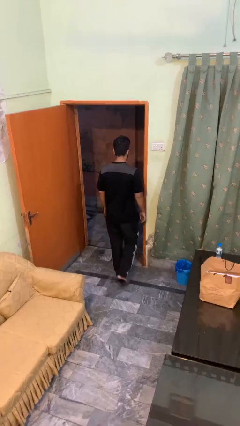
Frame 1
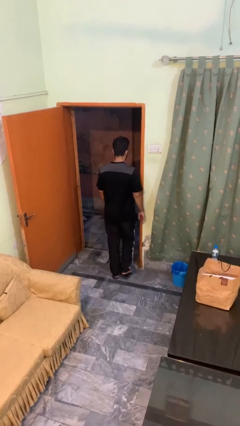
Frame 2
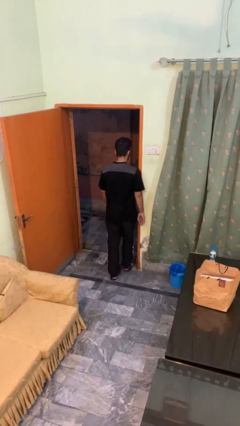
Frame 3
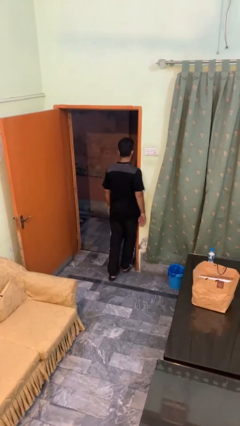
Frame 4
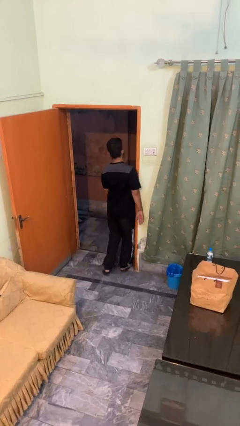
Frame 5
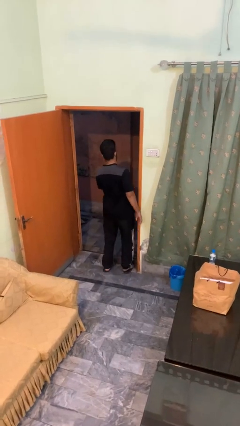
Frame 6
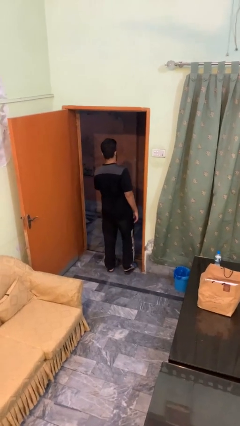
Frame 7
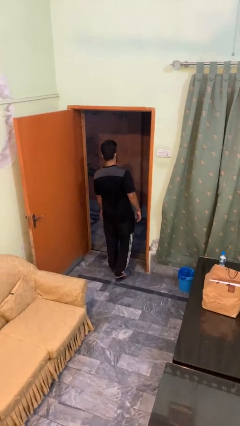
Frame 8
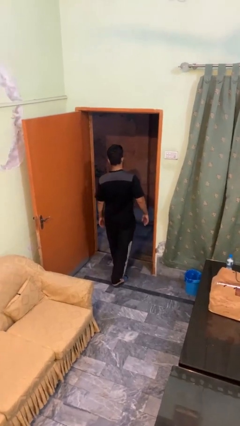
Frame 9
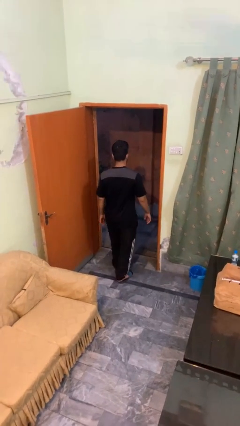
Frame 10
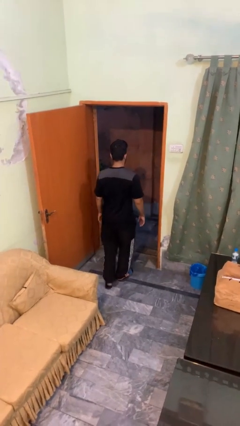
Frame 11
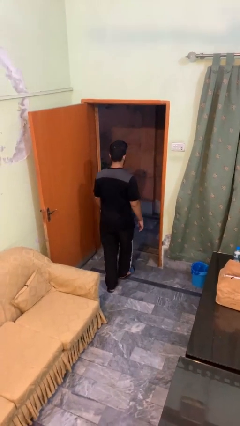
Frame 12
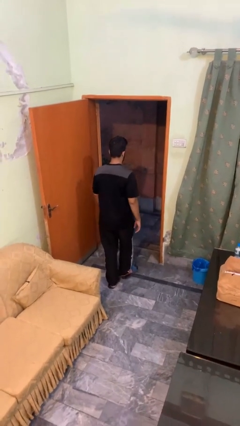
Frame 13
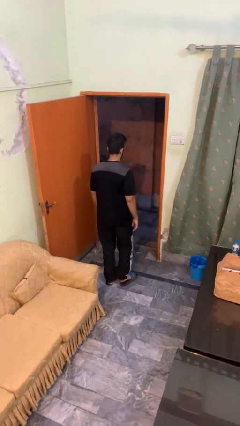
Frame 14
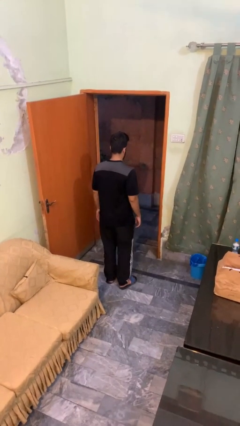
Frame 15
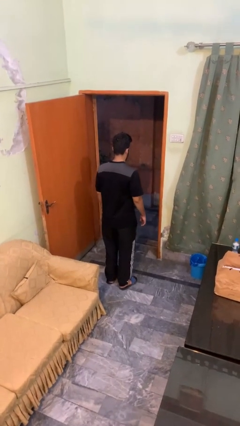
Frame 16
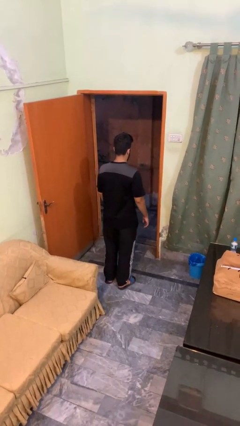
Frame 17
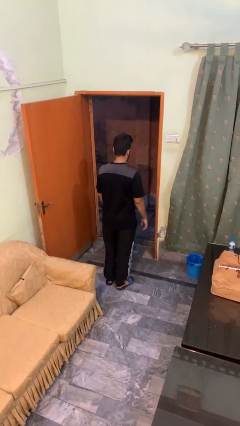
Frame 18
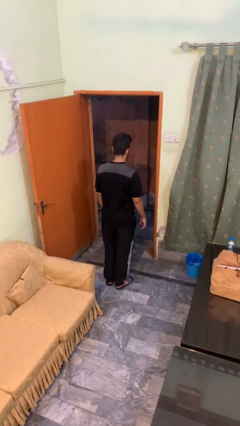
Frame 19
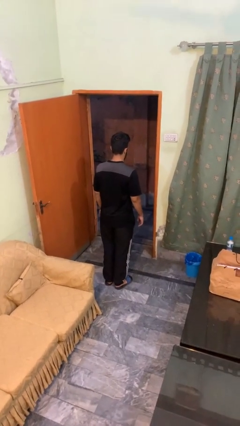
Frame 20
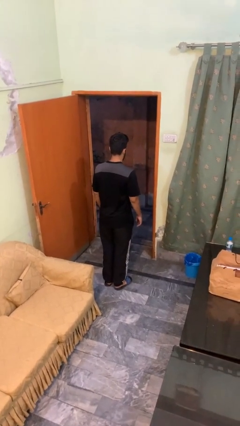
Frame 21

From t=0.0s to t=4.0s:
person bumps into wall

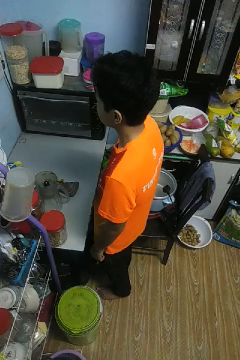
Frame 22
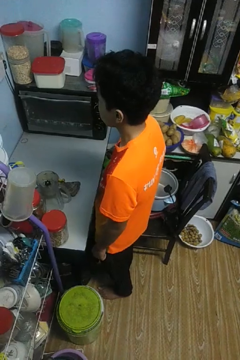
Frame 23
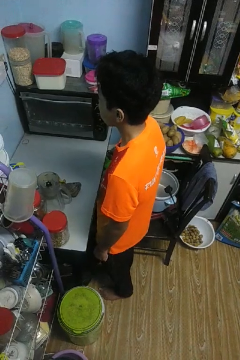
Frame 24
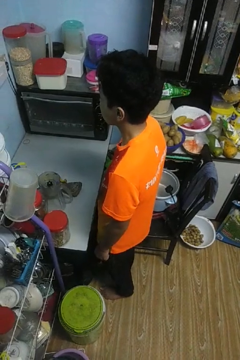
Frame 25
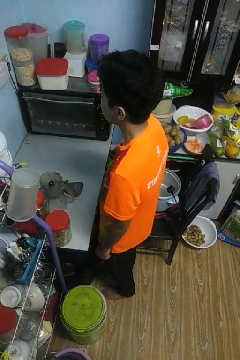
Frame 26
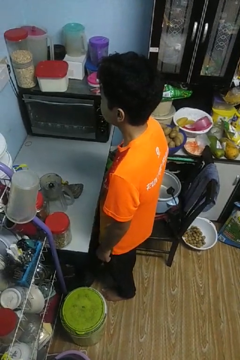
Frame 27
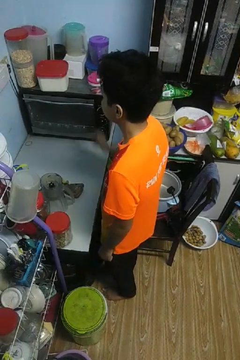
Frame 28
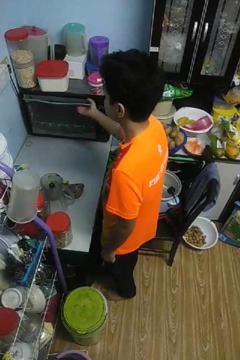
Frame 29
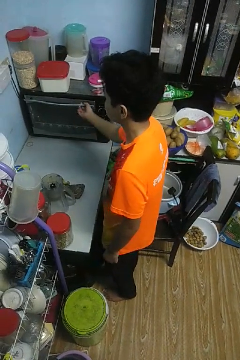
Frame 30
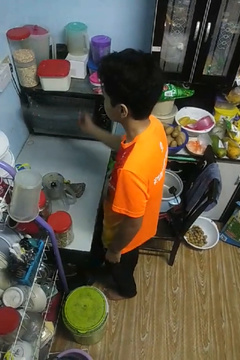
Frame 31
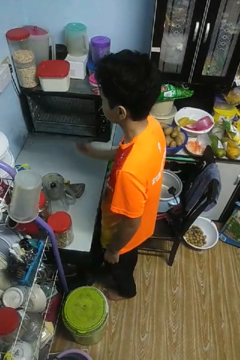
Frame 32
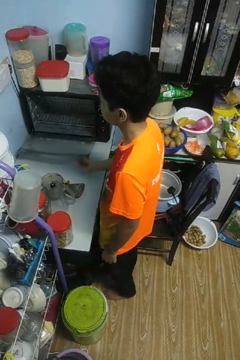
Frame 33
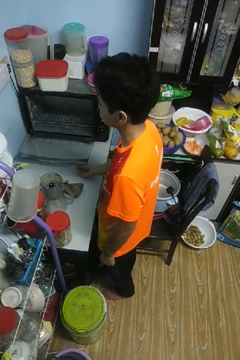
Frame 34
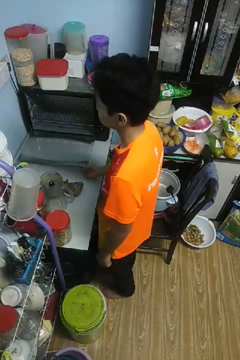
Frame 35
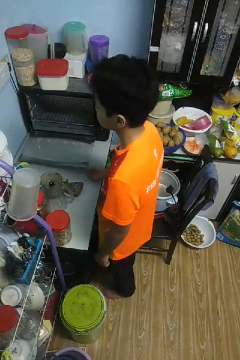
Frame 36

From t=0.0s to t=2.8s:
person opens oven door

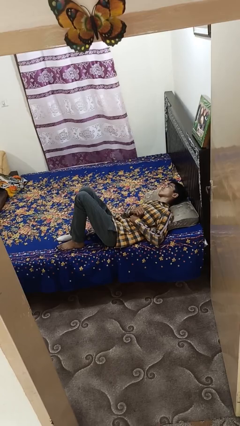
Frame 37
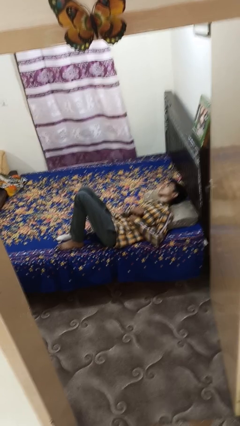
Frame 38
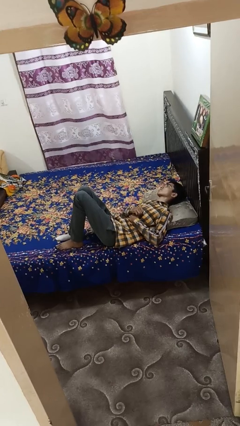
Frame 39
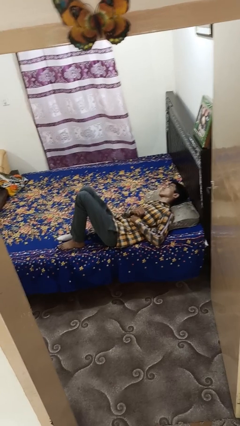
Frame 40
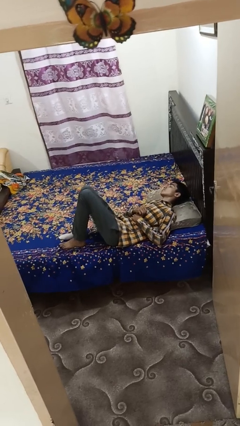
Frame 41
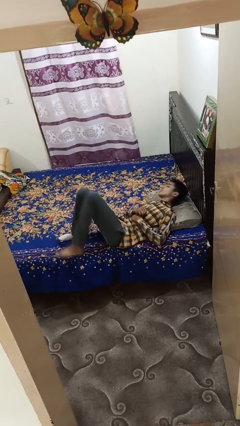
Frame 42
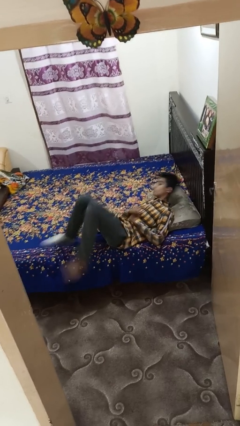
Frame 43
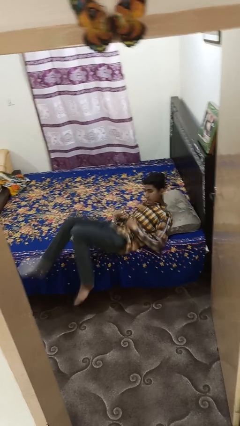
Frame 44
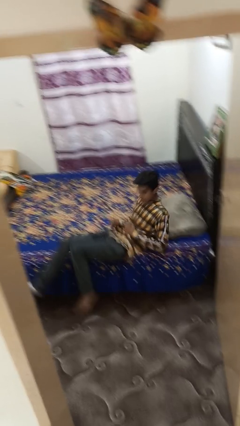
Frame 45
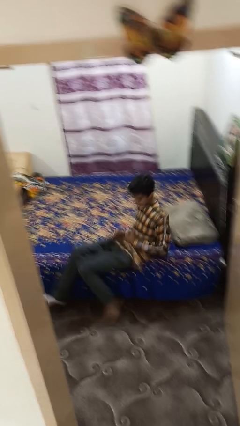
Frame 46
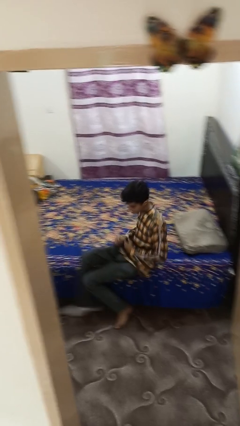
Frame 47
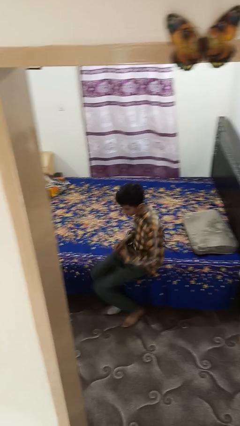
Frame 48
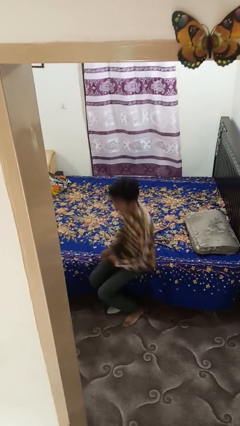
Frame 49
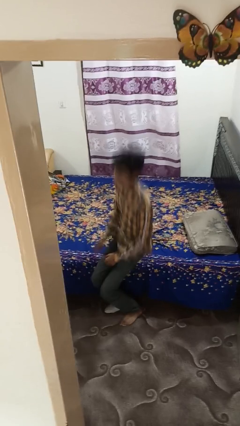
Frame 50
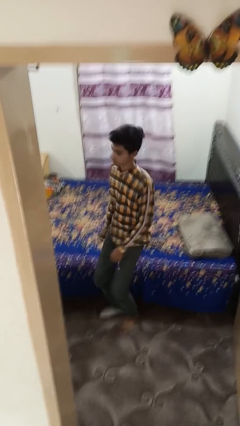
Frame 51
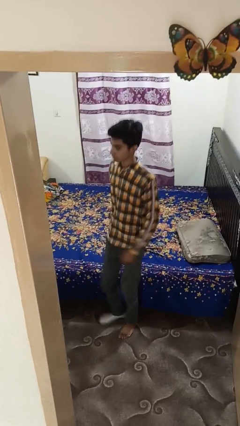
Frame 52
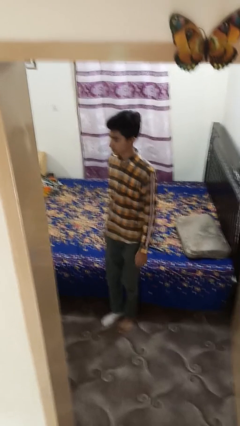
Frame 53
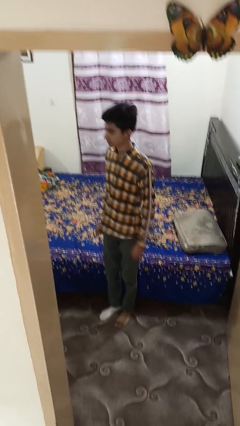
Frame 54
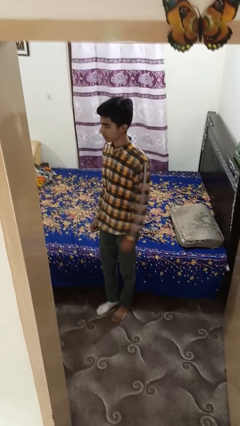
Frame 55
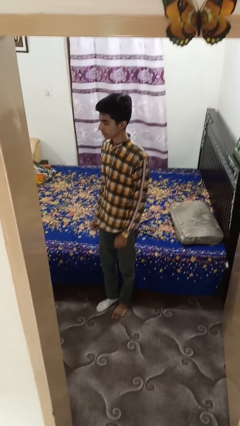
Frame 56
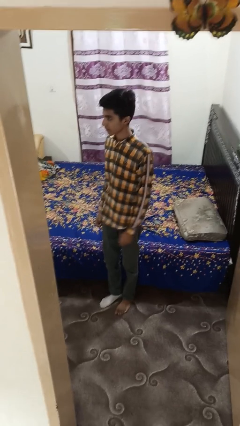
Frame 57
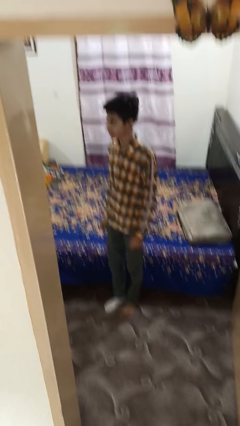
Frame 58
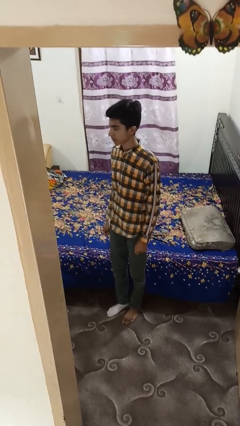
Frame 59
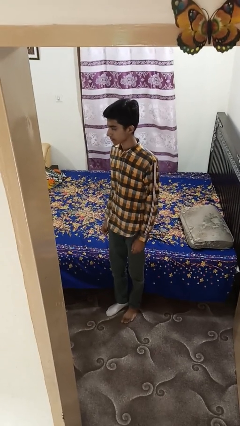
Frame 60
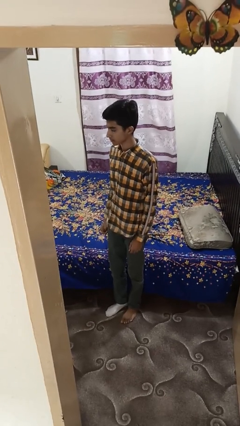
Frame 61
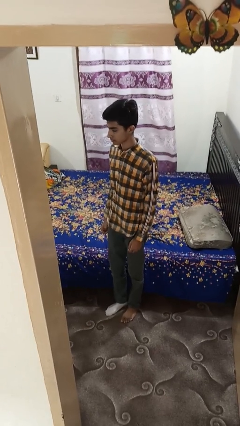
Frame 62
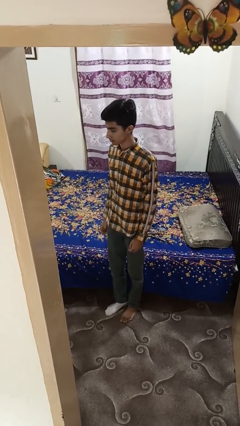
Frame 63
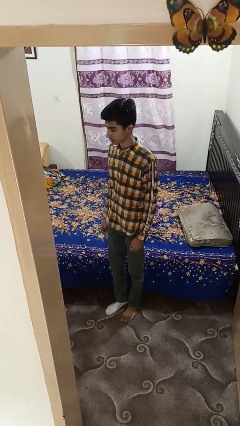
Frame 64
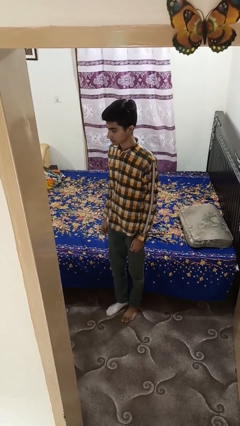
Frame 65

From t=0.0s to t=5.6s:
person stands up

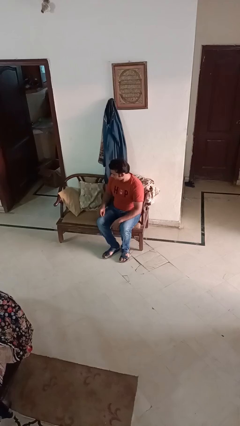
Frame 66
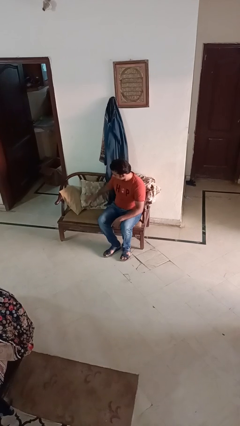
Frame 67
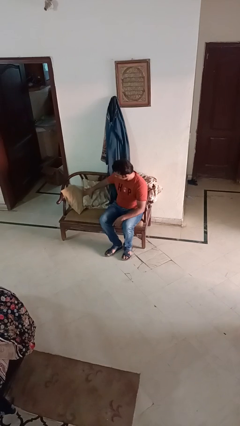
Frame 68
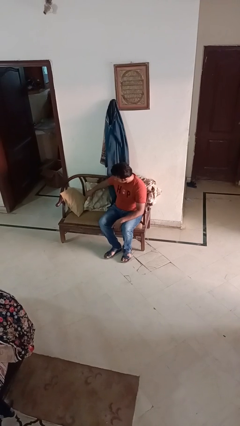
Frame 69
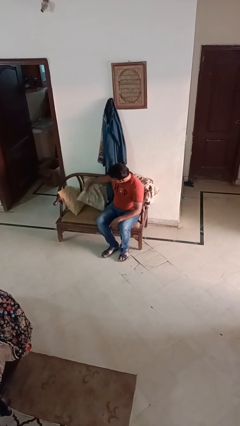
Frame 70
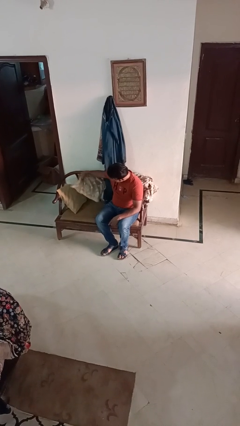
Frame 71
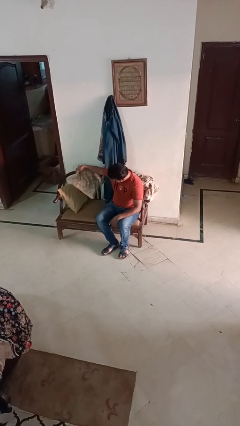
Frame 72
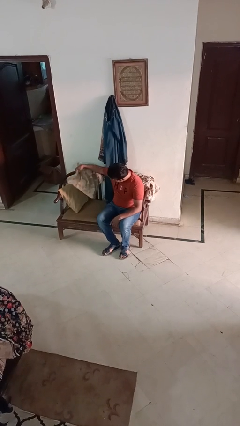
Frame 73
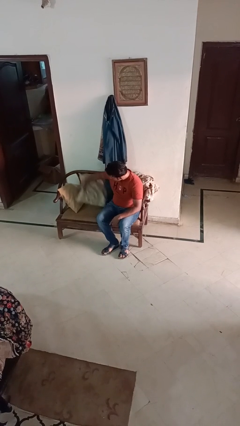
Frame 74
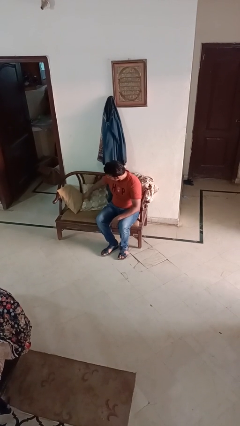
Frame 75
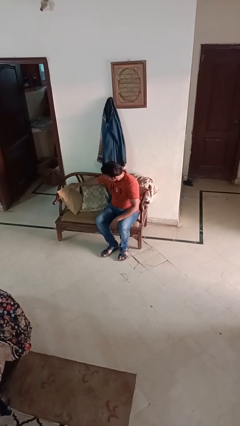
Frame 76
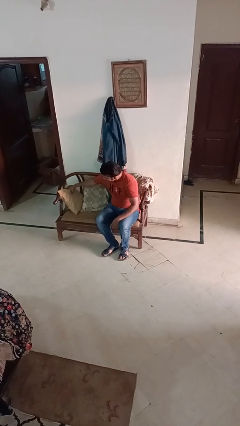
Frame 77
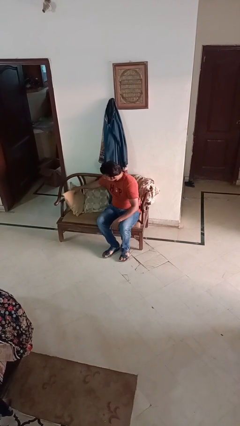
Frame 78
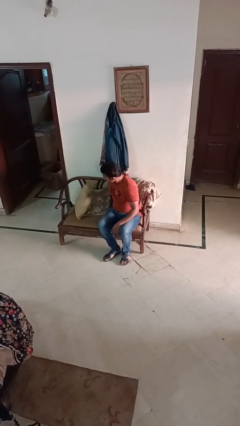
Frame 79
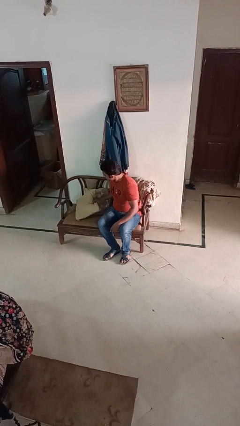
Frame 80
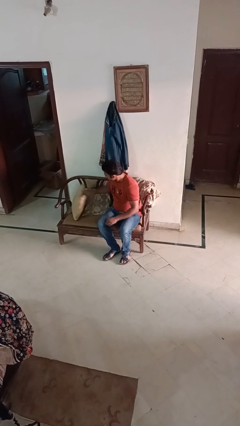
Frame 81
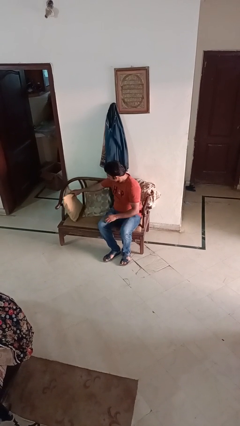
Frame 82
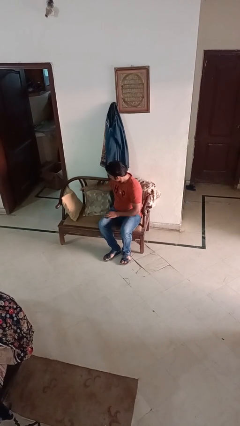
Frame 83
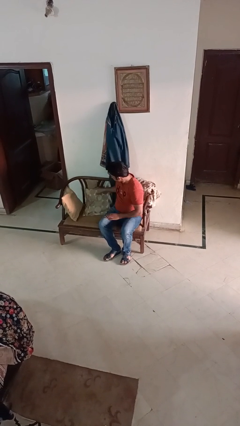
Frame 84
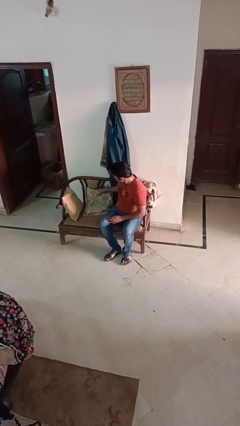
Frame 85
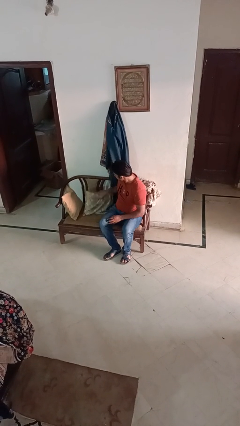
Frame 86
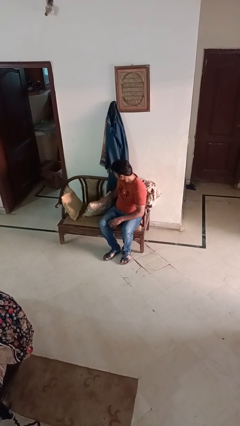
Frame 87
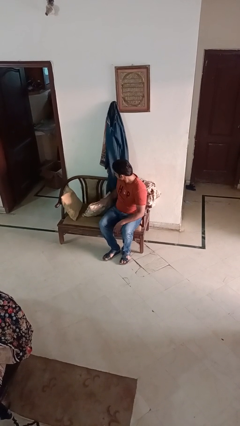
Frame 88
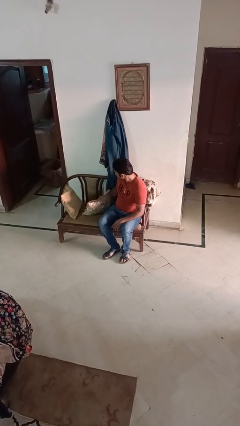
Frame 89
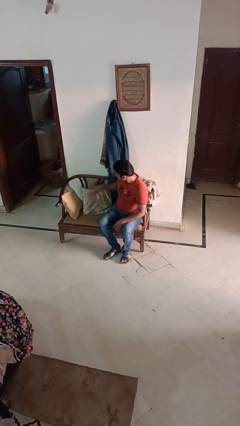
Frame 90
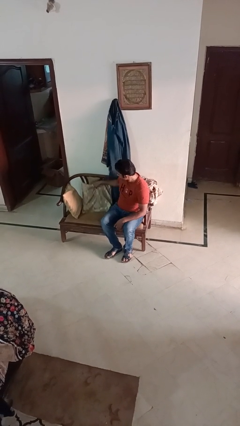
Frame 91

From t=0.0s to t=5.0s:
person searches in couch

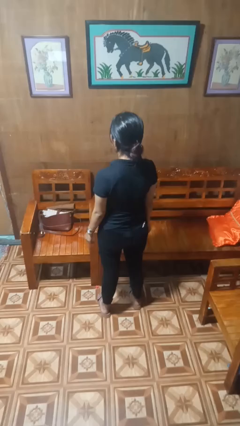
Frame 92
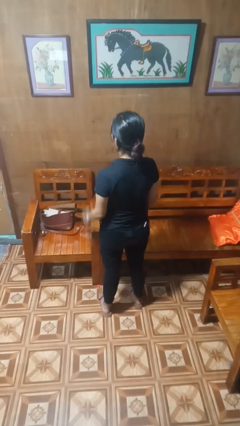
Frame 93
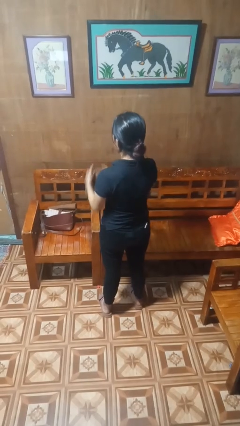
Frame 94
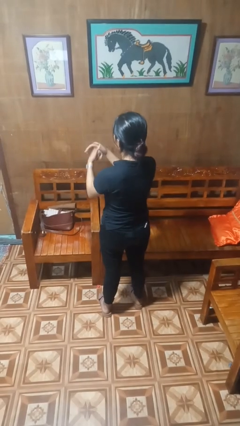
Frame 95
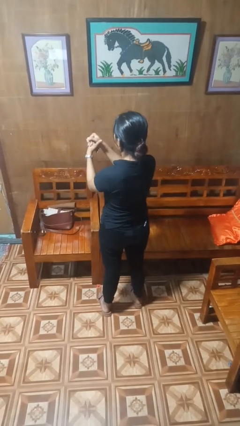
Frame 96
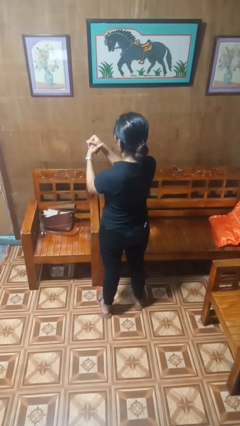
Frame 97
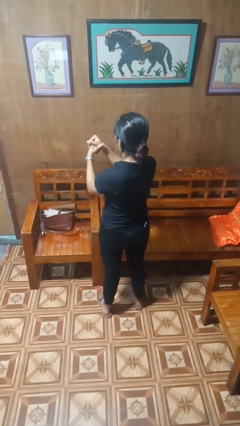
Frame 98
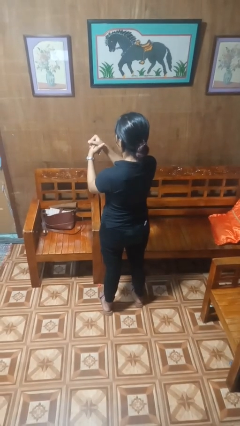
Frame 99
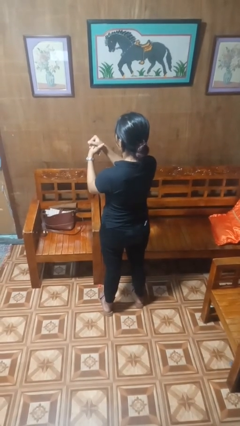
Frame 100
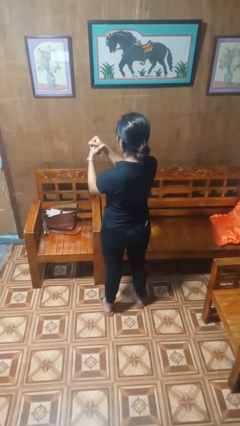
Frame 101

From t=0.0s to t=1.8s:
person cracks knuckles
